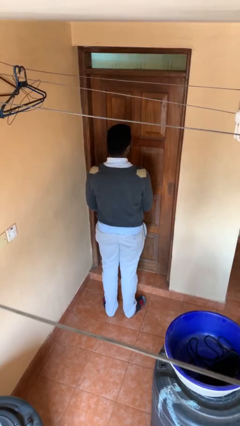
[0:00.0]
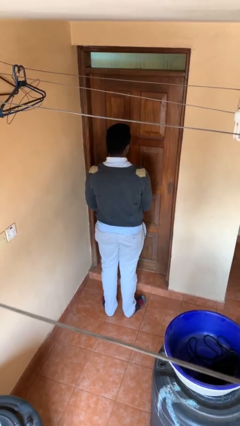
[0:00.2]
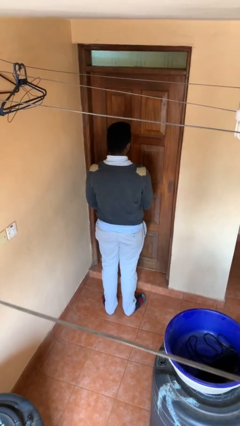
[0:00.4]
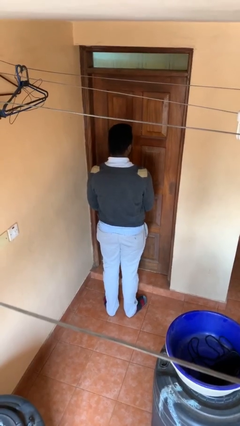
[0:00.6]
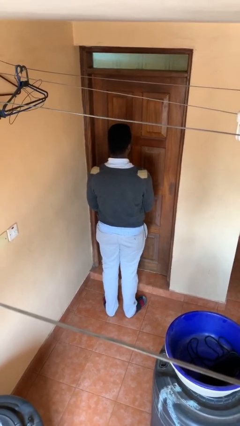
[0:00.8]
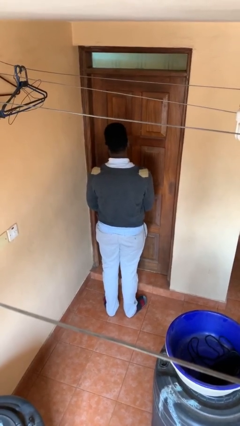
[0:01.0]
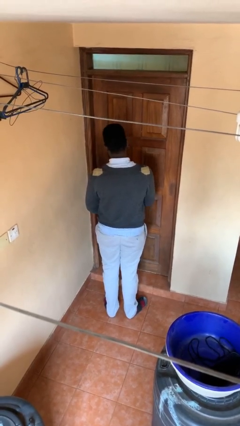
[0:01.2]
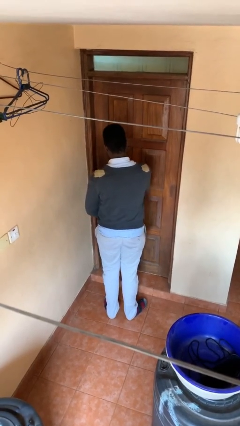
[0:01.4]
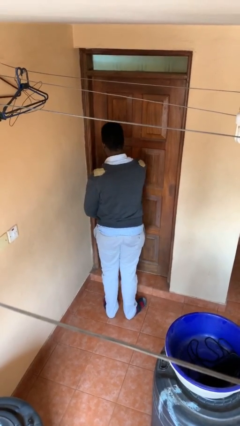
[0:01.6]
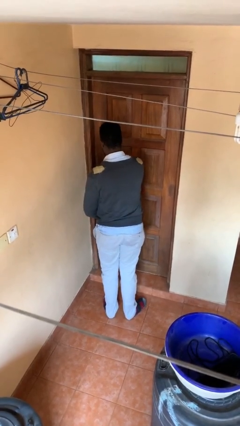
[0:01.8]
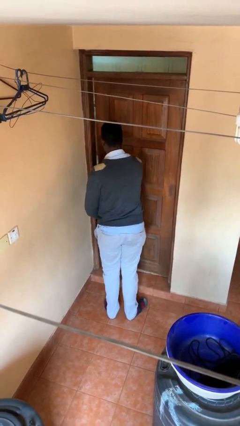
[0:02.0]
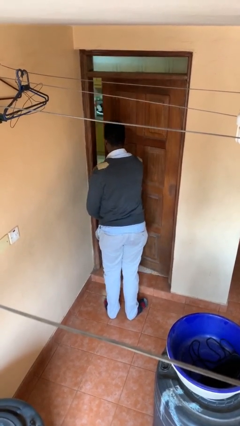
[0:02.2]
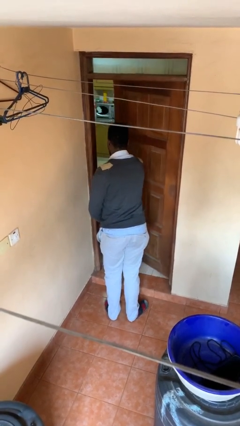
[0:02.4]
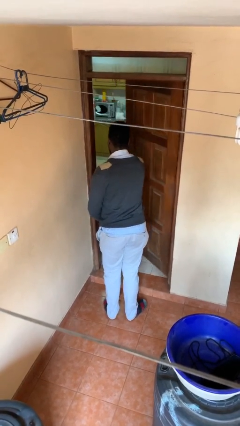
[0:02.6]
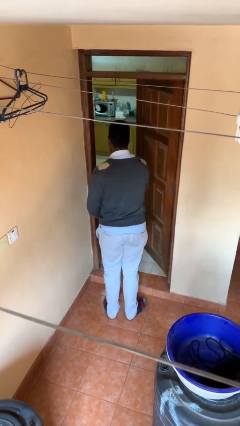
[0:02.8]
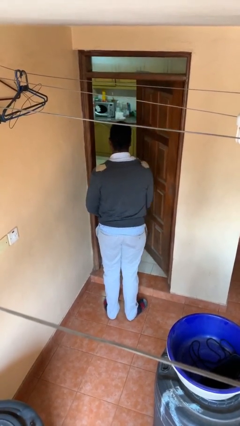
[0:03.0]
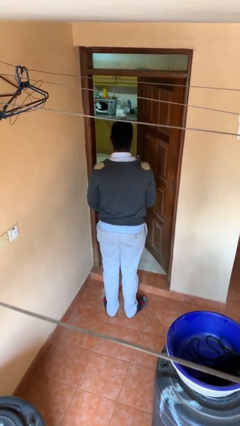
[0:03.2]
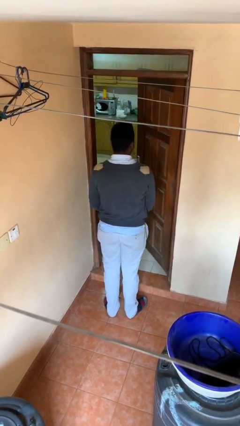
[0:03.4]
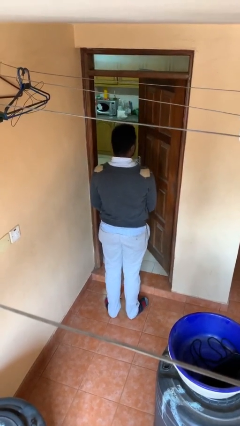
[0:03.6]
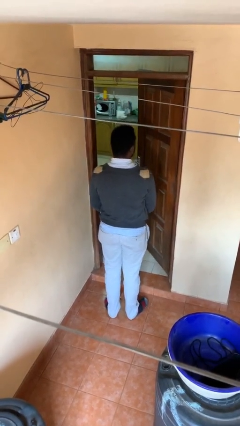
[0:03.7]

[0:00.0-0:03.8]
person opens facility door

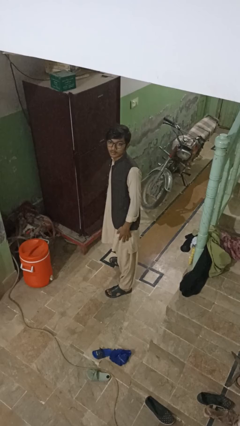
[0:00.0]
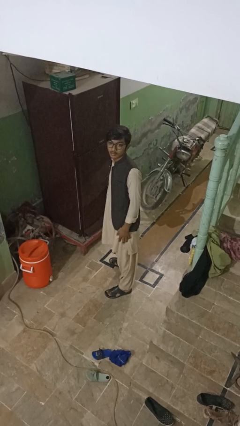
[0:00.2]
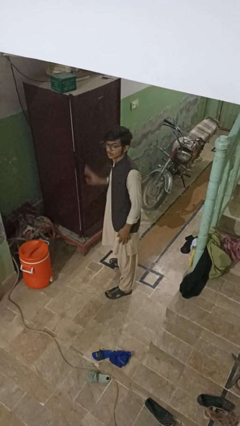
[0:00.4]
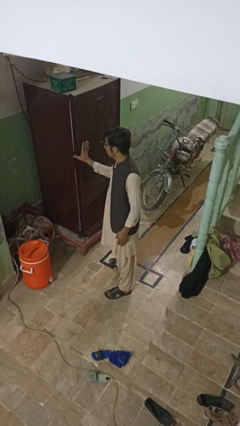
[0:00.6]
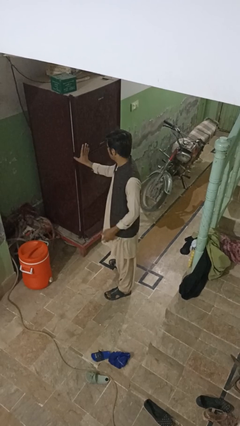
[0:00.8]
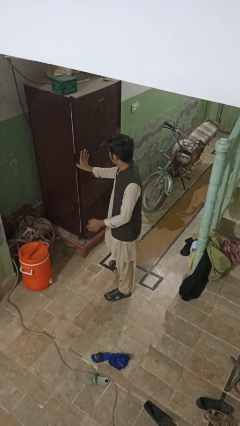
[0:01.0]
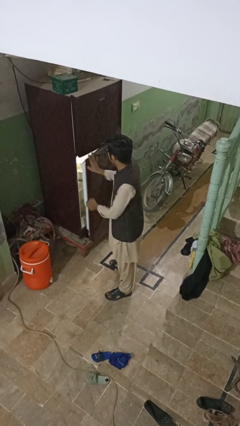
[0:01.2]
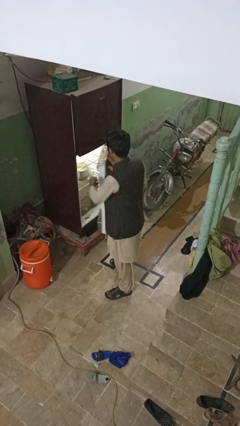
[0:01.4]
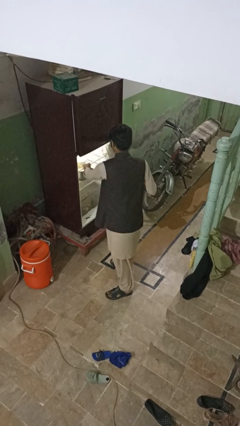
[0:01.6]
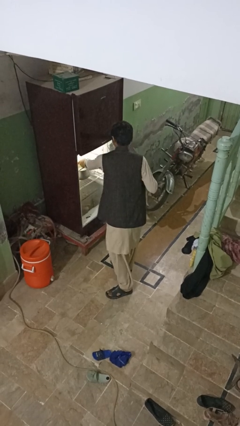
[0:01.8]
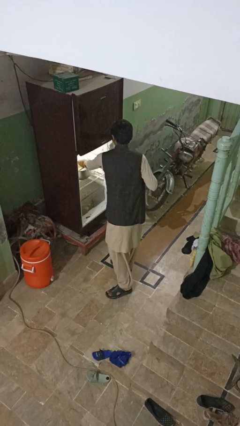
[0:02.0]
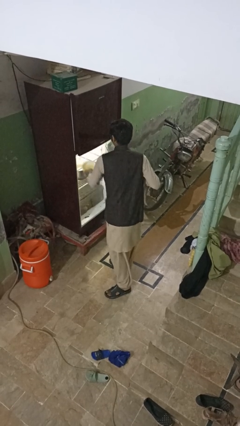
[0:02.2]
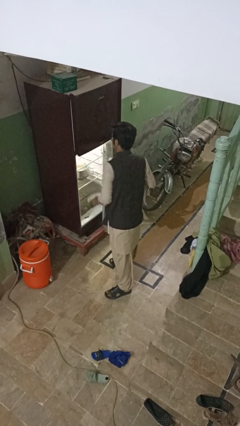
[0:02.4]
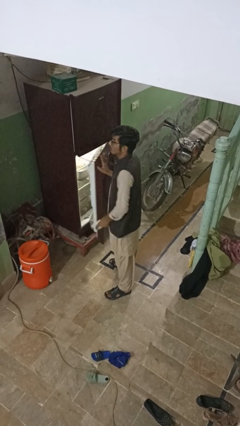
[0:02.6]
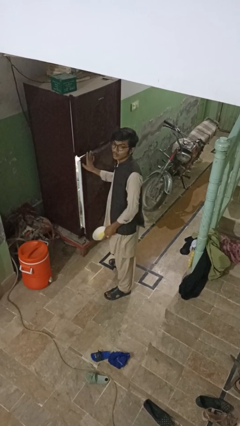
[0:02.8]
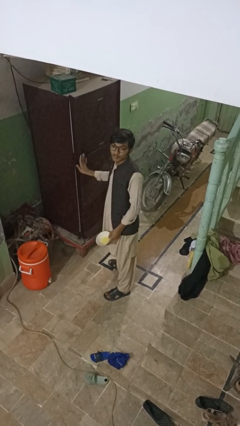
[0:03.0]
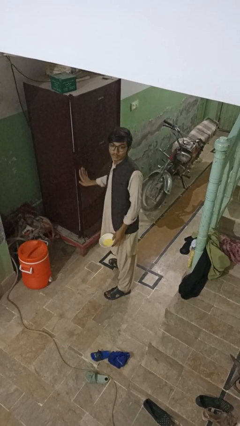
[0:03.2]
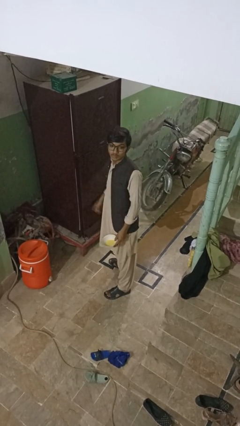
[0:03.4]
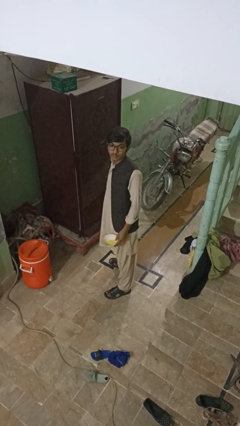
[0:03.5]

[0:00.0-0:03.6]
person takes object from refrigerator

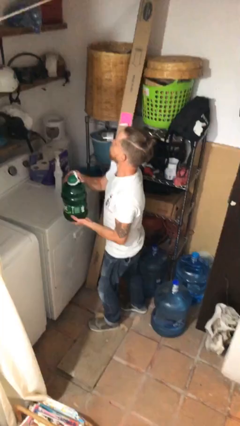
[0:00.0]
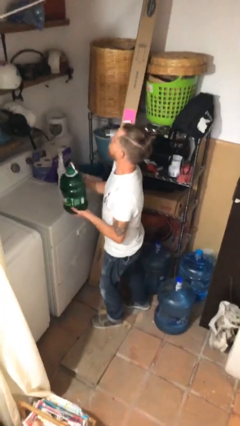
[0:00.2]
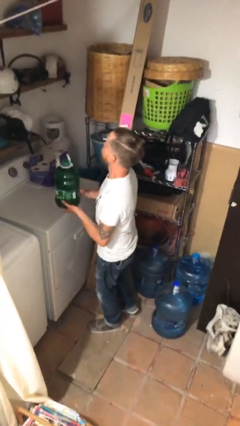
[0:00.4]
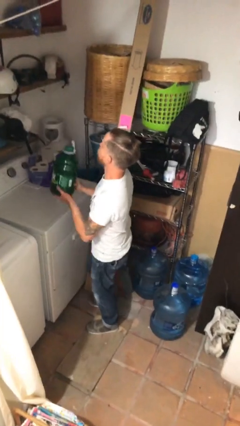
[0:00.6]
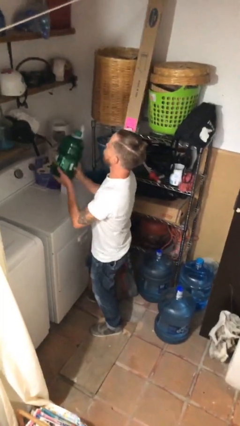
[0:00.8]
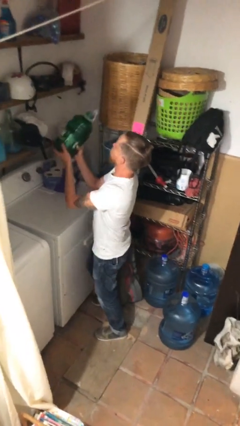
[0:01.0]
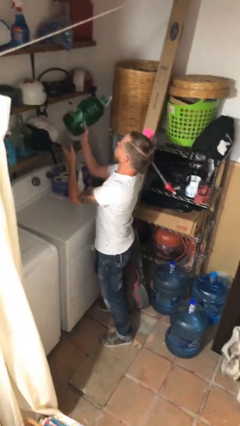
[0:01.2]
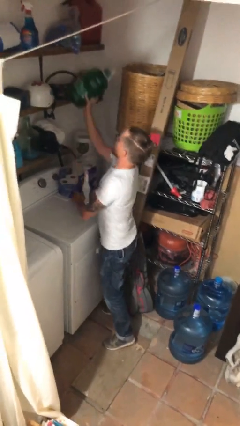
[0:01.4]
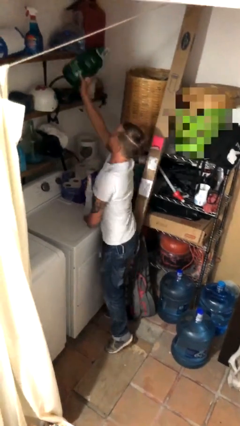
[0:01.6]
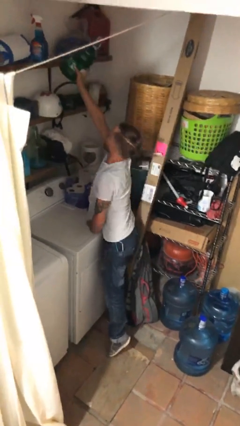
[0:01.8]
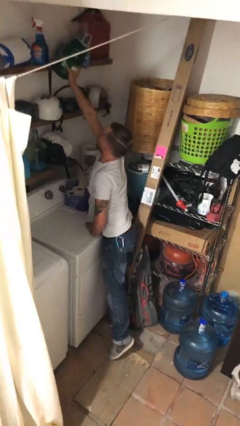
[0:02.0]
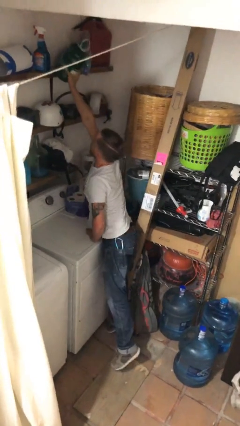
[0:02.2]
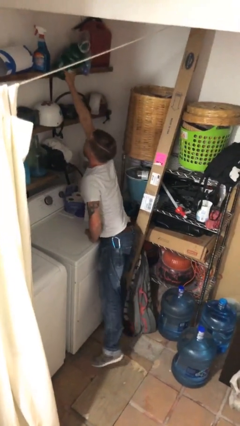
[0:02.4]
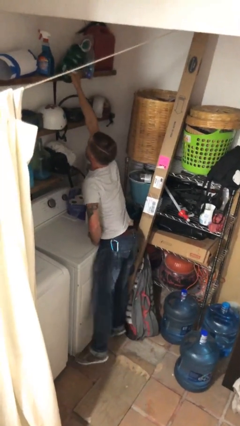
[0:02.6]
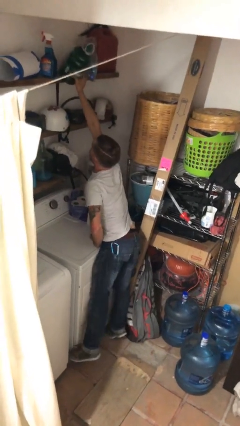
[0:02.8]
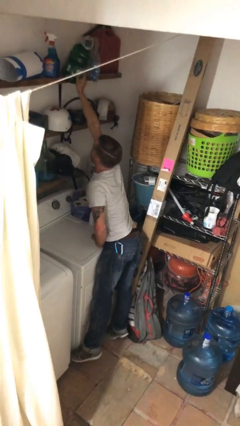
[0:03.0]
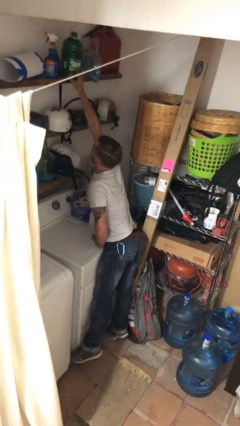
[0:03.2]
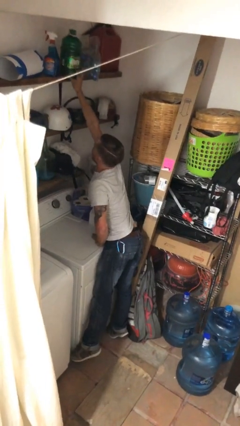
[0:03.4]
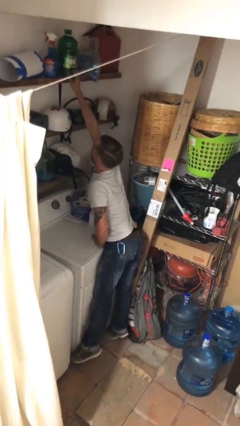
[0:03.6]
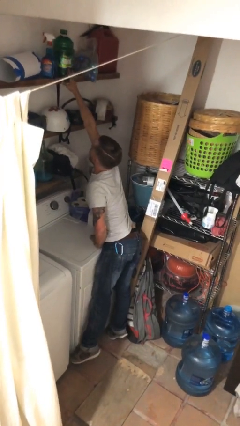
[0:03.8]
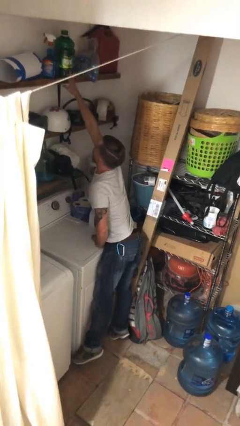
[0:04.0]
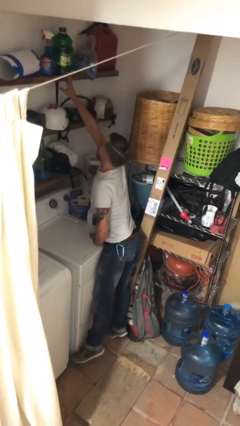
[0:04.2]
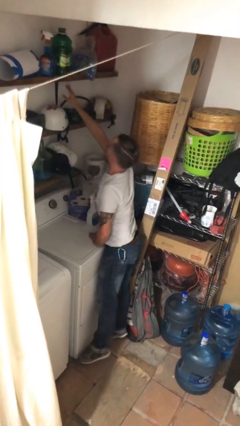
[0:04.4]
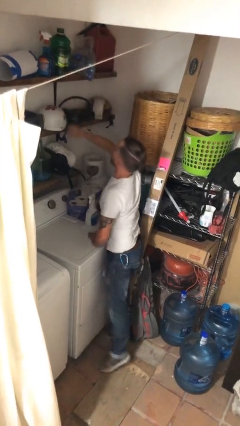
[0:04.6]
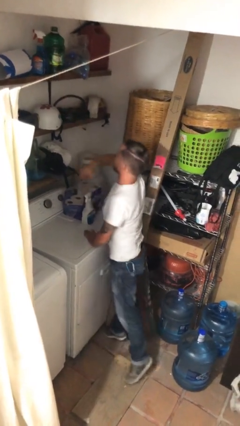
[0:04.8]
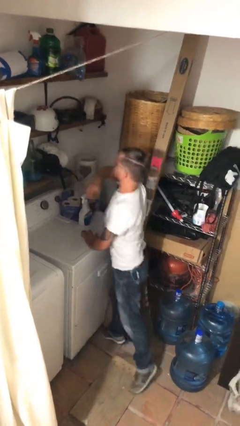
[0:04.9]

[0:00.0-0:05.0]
person puts down object on shelf

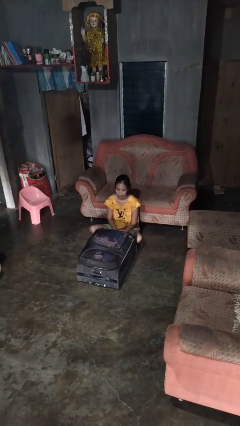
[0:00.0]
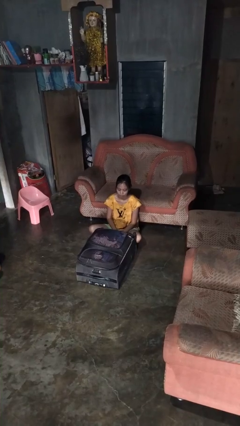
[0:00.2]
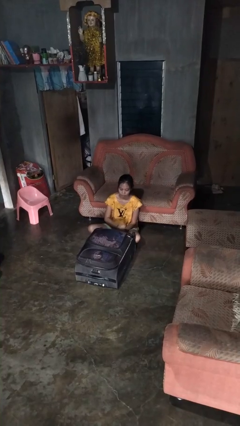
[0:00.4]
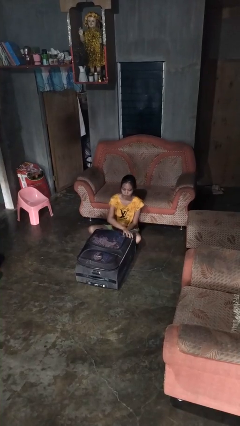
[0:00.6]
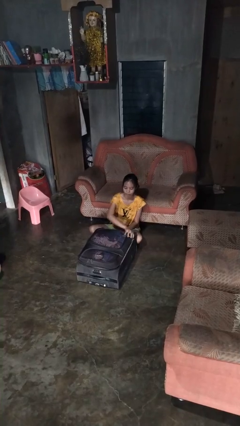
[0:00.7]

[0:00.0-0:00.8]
person opens suitcase

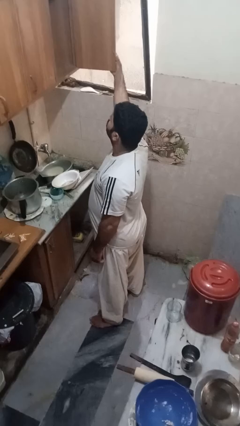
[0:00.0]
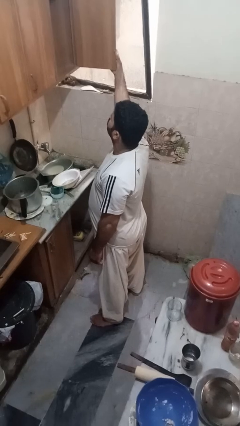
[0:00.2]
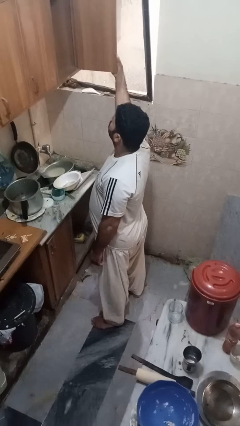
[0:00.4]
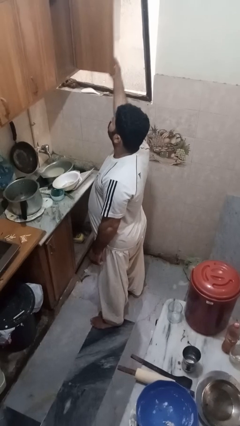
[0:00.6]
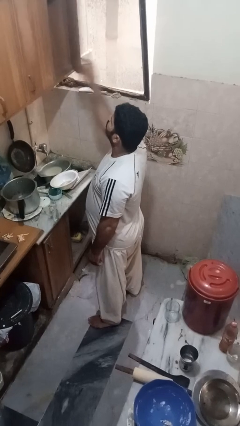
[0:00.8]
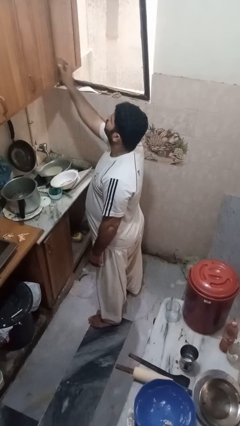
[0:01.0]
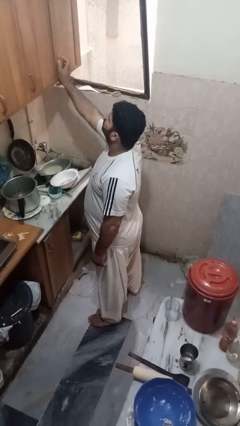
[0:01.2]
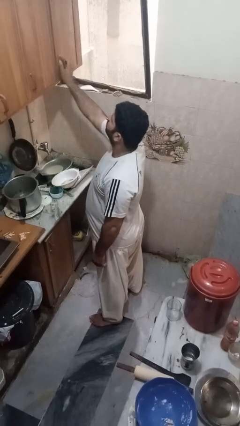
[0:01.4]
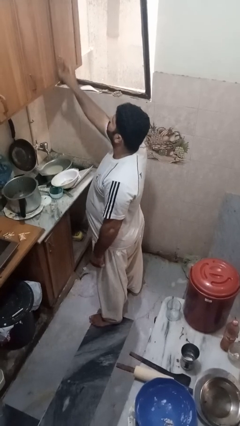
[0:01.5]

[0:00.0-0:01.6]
person closes cabinet

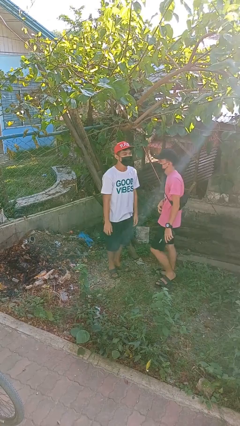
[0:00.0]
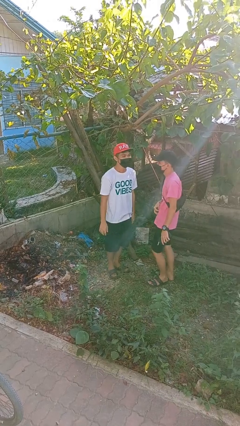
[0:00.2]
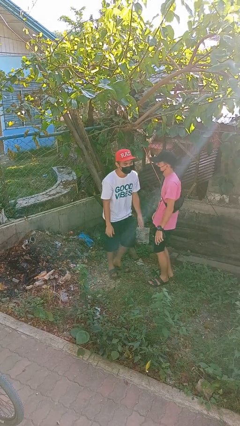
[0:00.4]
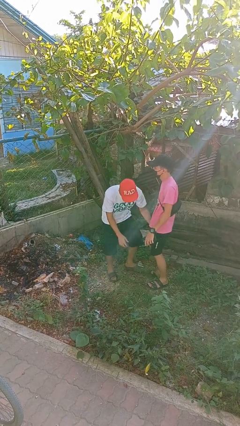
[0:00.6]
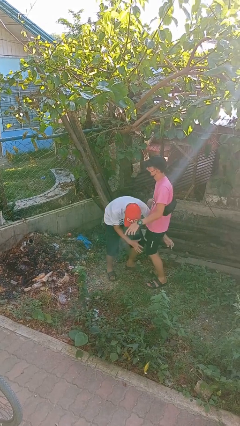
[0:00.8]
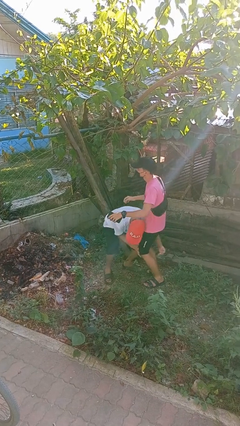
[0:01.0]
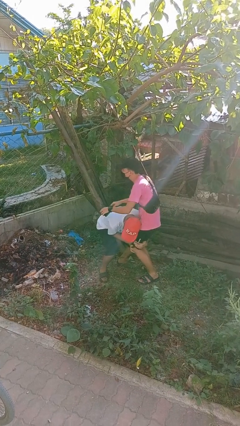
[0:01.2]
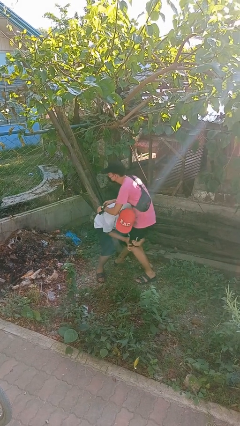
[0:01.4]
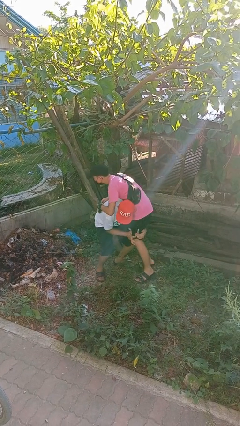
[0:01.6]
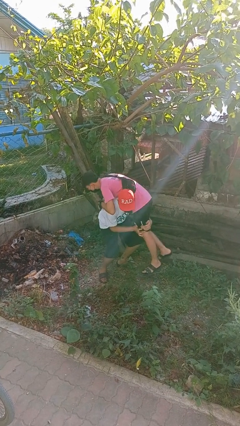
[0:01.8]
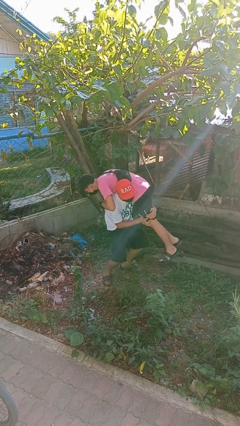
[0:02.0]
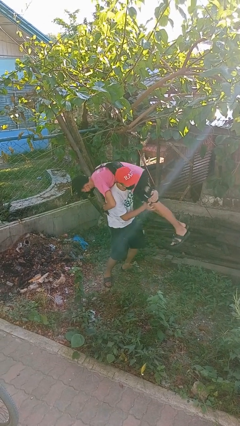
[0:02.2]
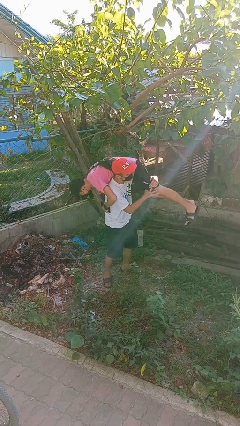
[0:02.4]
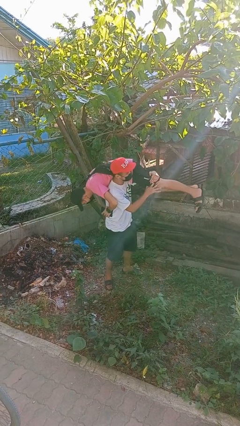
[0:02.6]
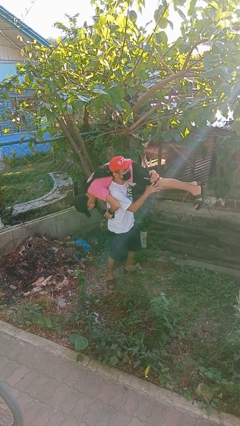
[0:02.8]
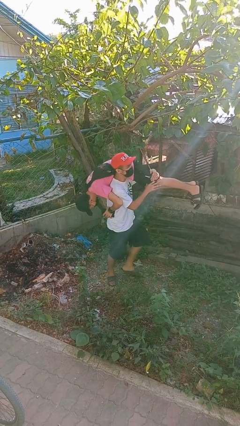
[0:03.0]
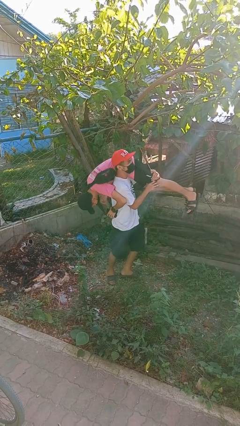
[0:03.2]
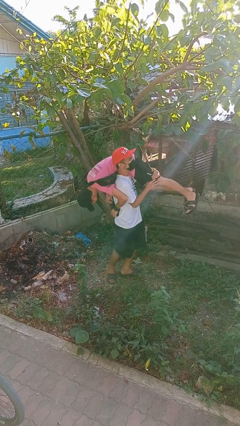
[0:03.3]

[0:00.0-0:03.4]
person carries person over shoulder
